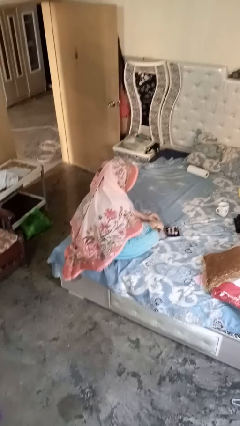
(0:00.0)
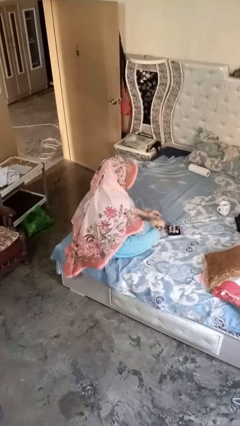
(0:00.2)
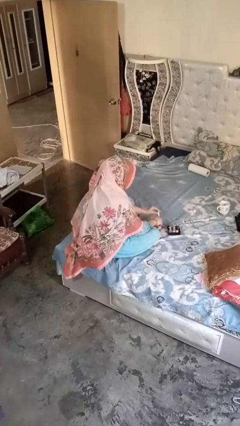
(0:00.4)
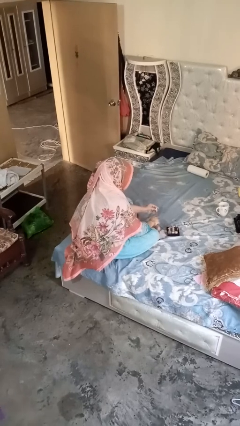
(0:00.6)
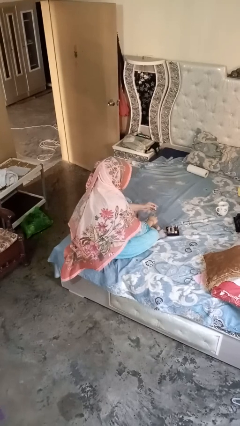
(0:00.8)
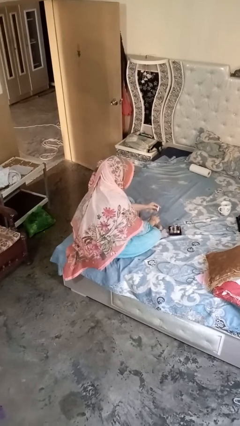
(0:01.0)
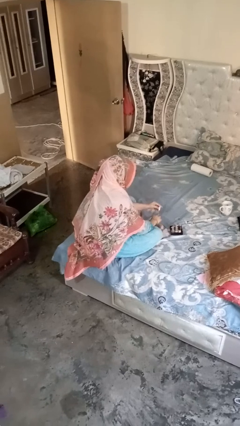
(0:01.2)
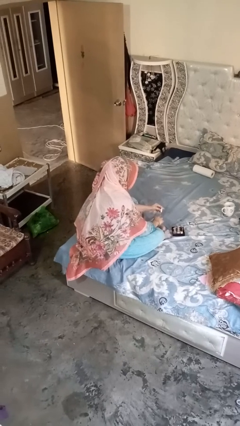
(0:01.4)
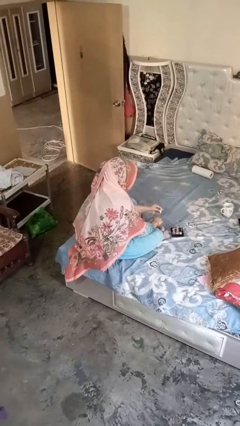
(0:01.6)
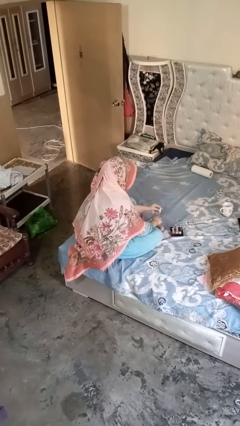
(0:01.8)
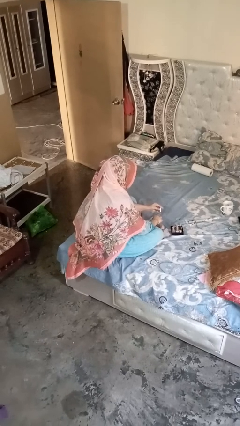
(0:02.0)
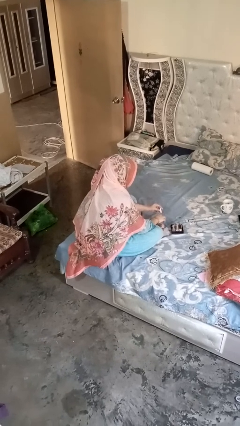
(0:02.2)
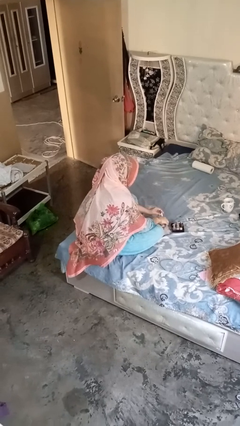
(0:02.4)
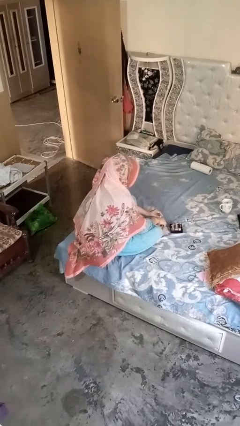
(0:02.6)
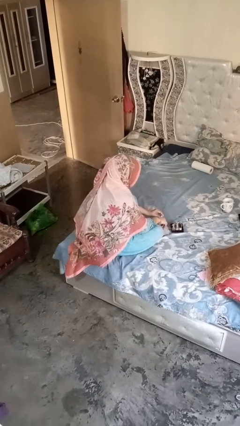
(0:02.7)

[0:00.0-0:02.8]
person paints fingernails

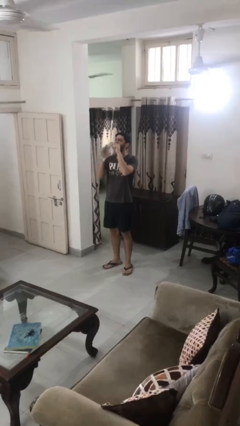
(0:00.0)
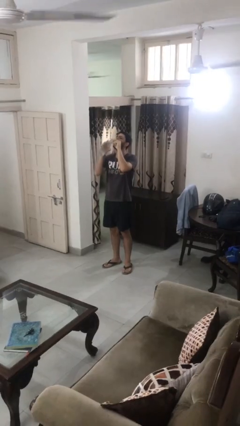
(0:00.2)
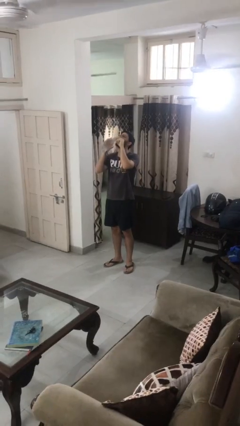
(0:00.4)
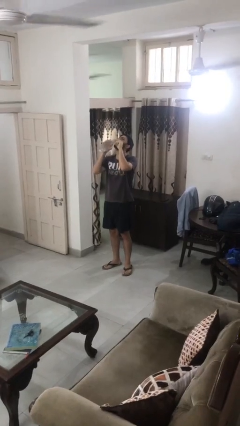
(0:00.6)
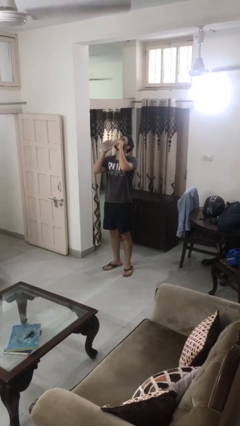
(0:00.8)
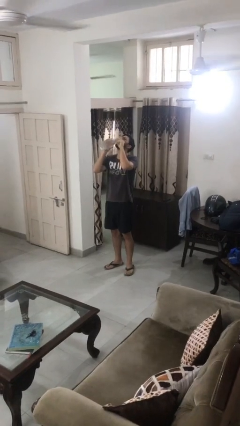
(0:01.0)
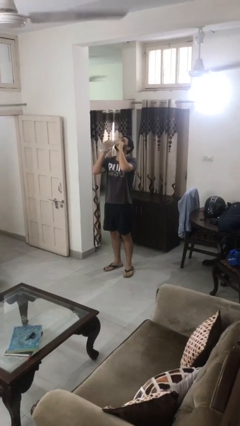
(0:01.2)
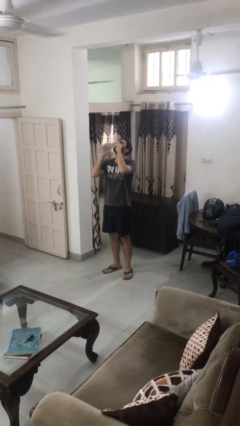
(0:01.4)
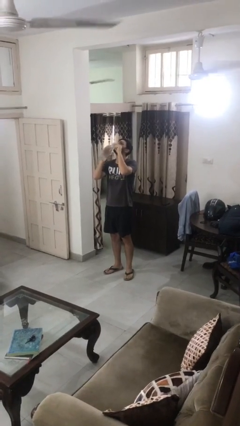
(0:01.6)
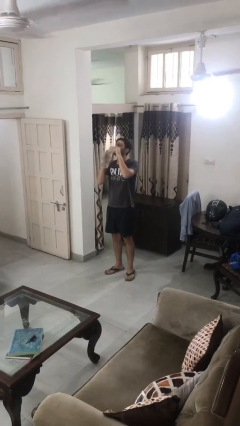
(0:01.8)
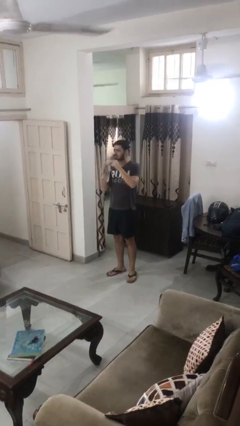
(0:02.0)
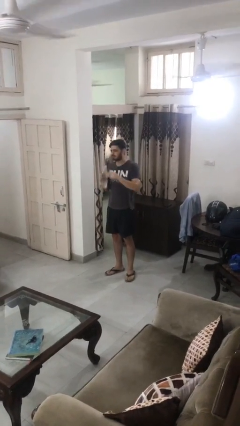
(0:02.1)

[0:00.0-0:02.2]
person drinks from bottle

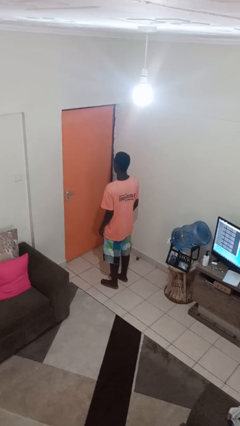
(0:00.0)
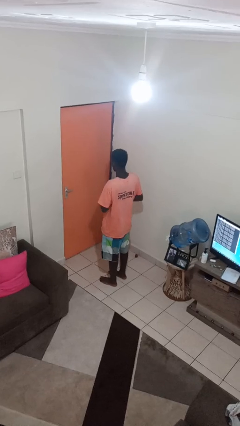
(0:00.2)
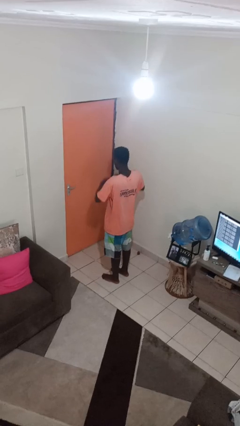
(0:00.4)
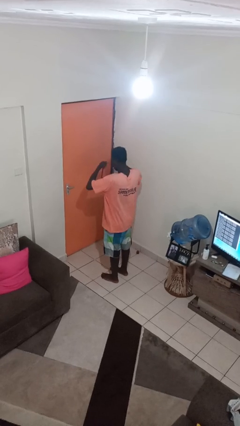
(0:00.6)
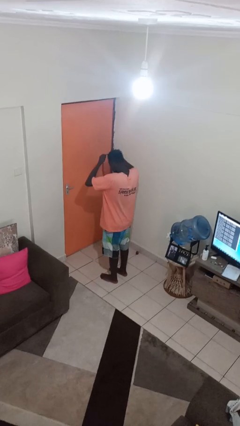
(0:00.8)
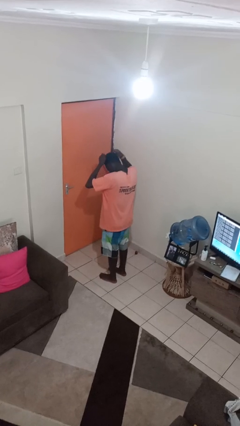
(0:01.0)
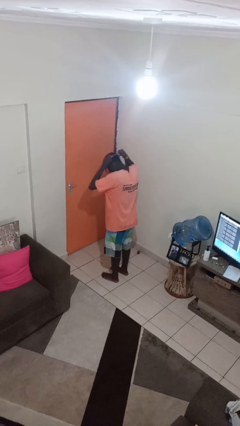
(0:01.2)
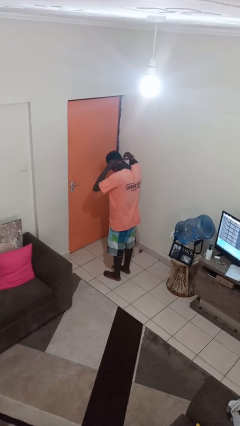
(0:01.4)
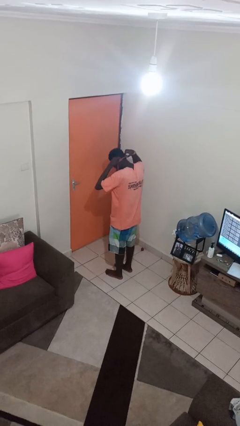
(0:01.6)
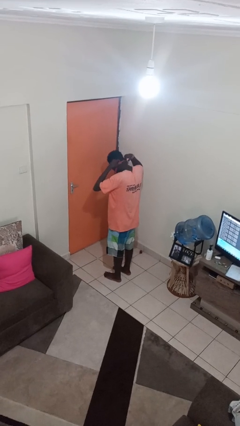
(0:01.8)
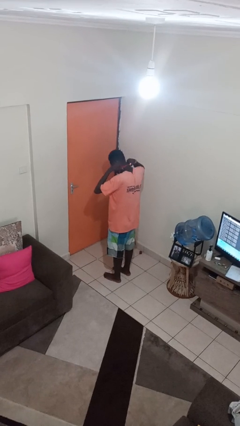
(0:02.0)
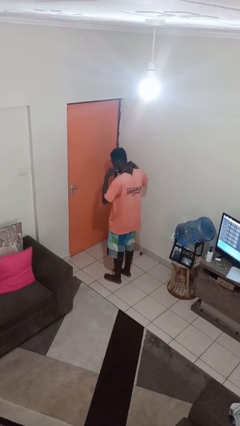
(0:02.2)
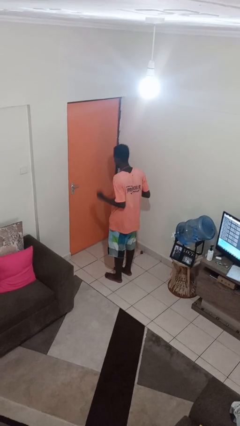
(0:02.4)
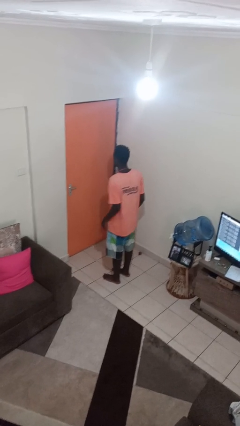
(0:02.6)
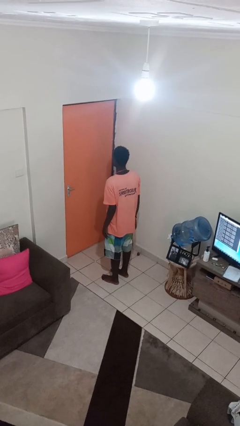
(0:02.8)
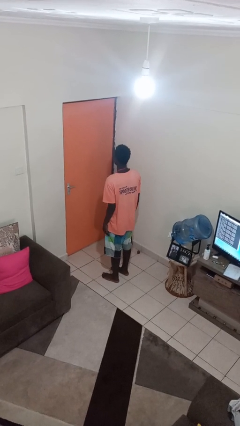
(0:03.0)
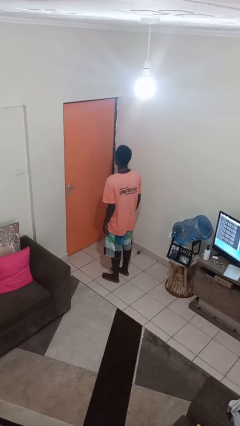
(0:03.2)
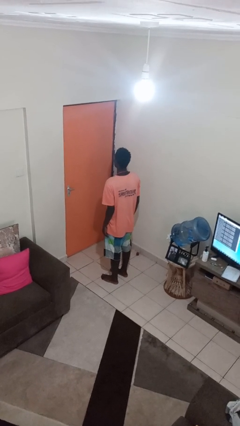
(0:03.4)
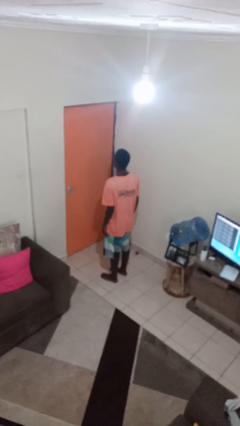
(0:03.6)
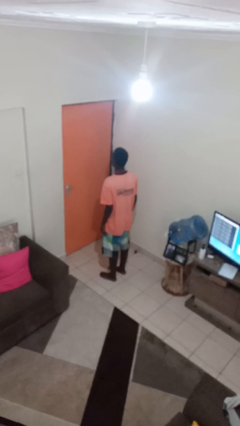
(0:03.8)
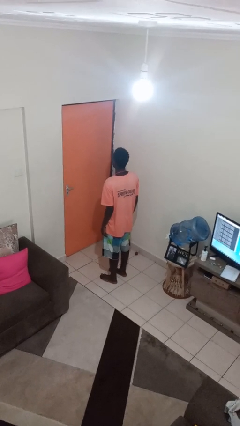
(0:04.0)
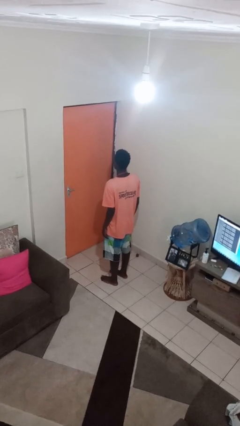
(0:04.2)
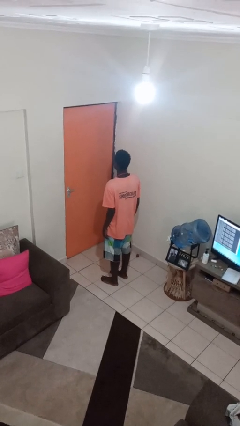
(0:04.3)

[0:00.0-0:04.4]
person puts on necklace

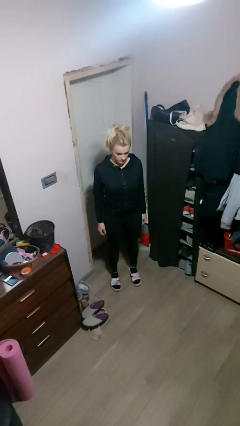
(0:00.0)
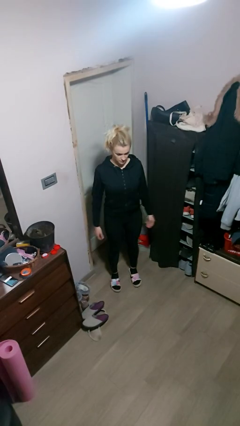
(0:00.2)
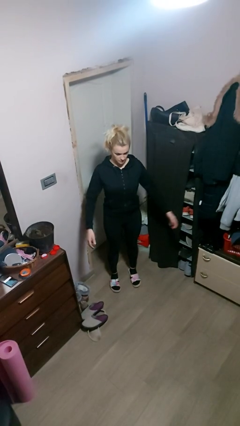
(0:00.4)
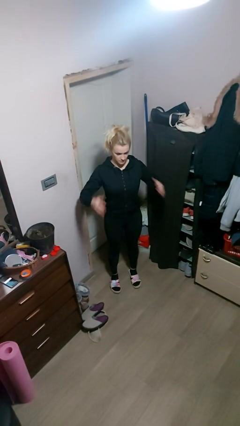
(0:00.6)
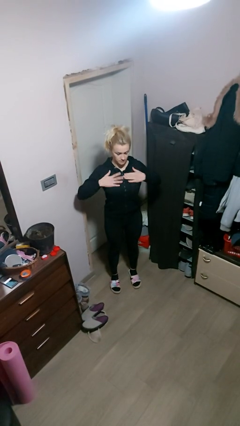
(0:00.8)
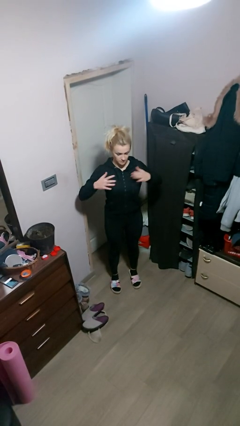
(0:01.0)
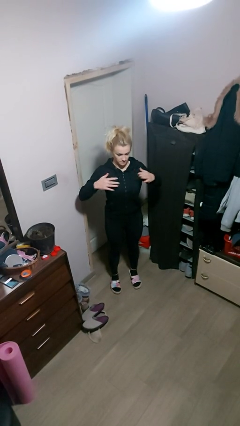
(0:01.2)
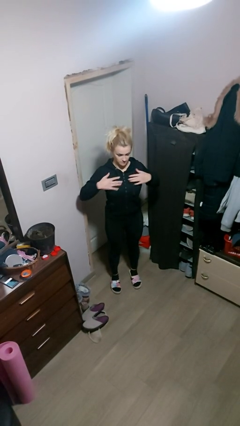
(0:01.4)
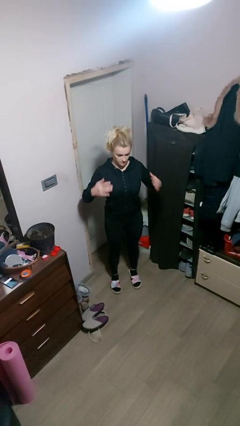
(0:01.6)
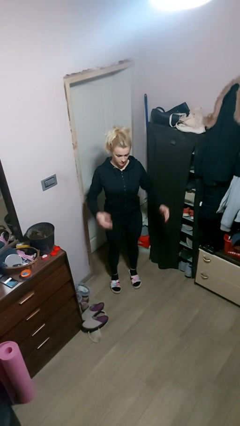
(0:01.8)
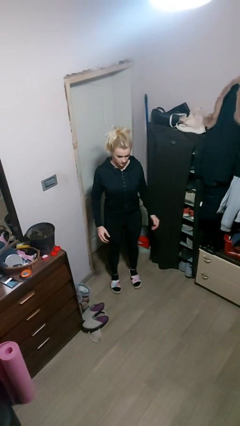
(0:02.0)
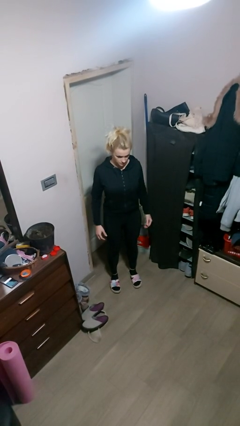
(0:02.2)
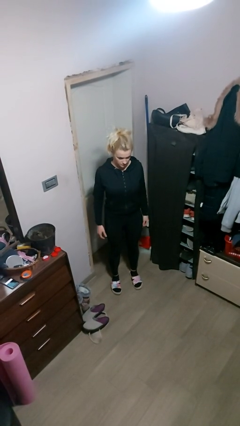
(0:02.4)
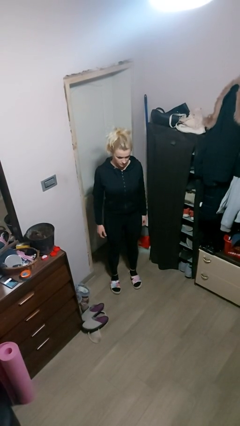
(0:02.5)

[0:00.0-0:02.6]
person drums on chest

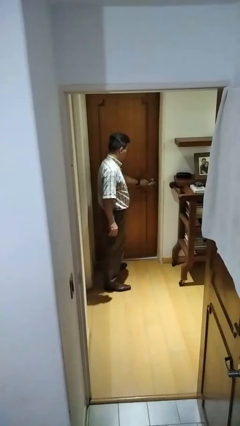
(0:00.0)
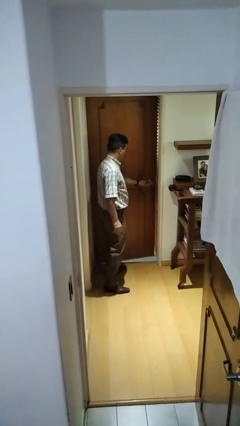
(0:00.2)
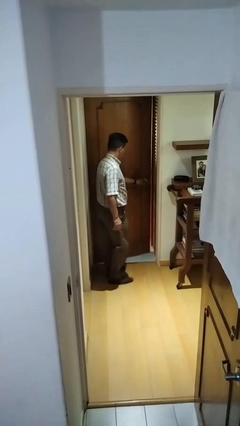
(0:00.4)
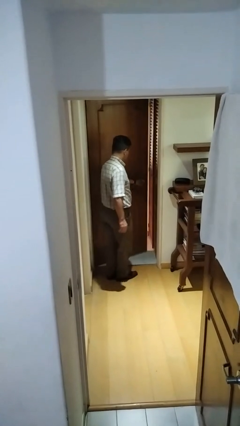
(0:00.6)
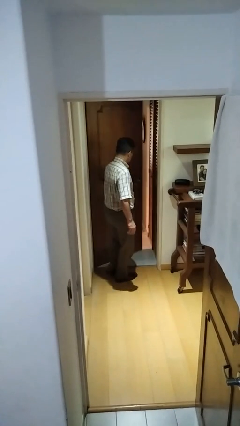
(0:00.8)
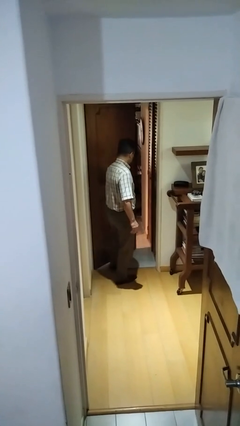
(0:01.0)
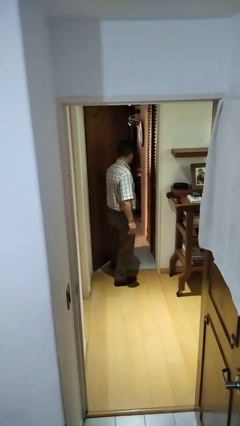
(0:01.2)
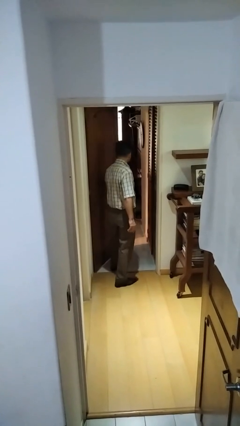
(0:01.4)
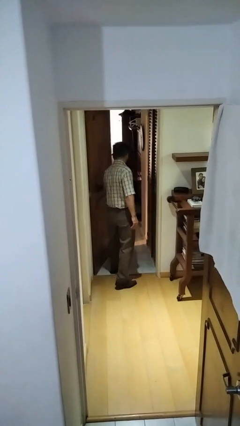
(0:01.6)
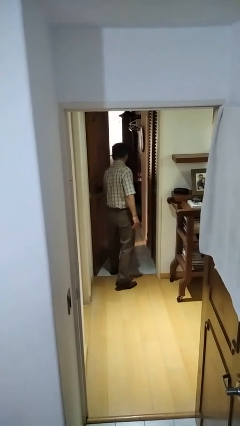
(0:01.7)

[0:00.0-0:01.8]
person opens facility door

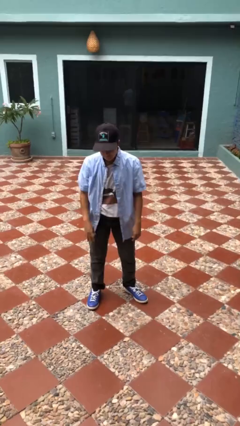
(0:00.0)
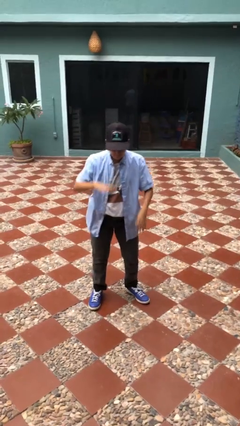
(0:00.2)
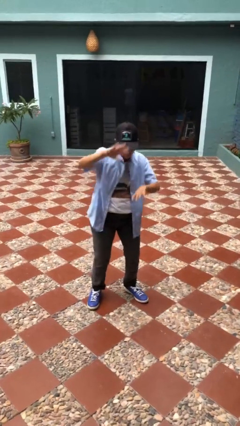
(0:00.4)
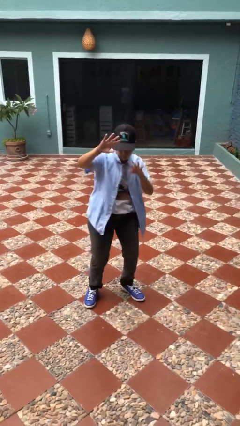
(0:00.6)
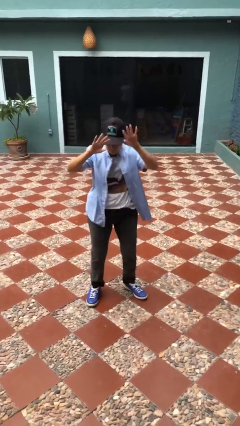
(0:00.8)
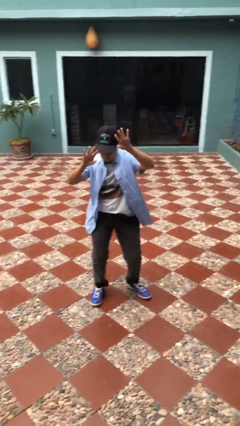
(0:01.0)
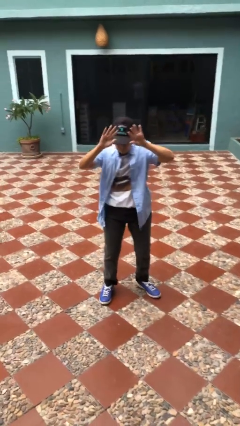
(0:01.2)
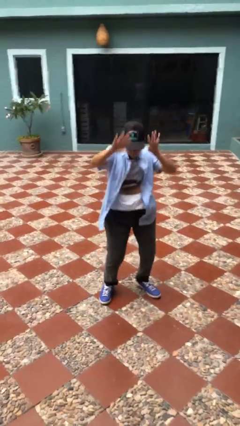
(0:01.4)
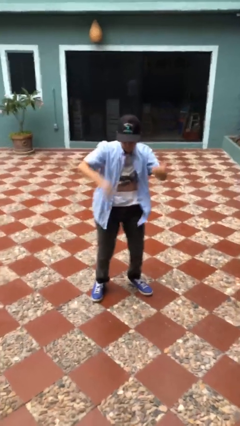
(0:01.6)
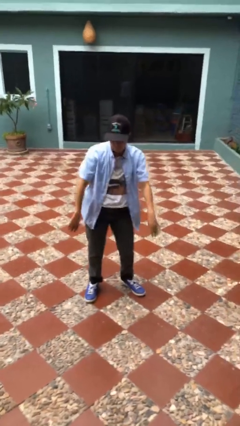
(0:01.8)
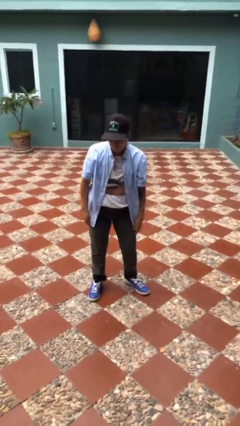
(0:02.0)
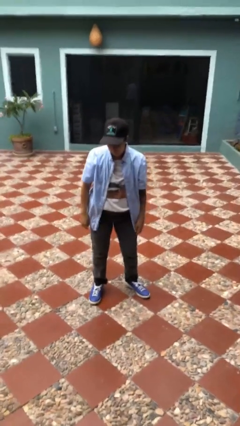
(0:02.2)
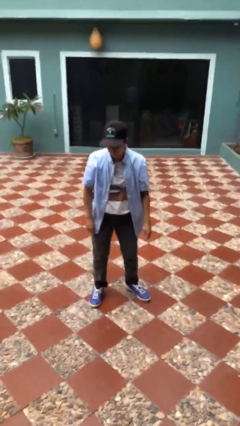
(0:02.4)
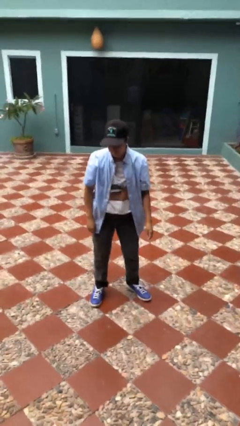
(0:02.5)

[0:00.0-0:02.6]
person dances in place

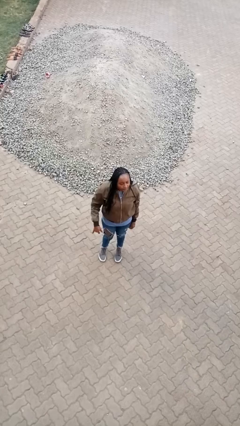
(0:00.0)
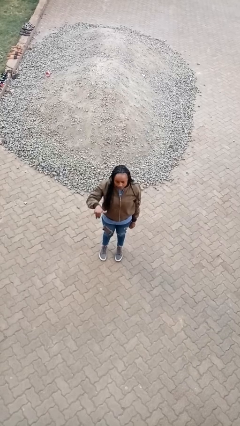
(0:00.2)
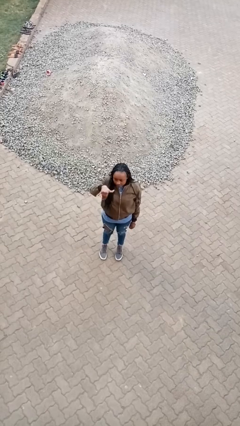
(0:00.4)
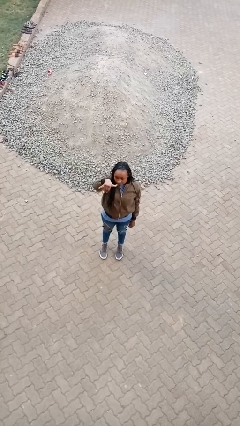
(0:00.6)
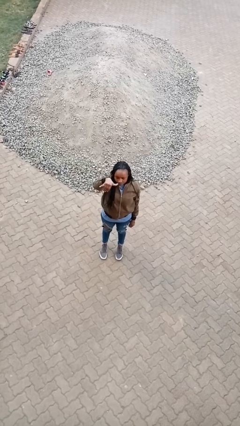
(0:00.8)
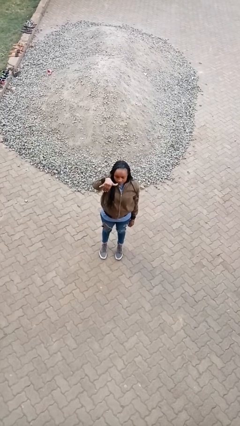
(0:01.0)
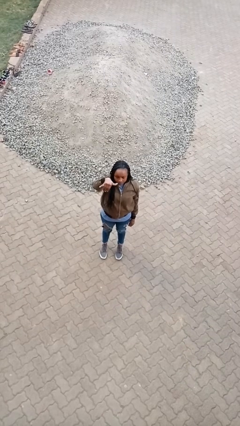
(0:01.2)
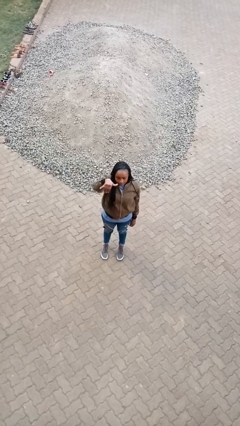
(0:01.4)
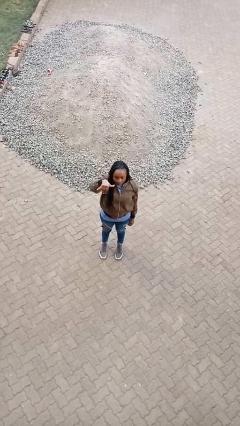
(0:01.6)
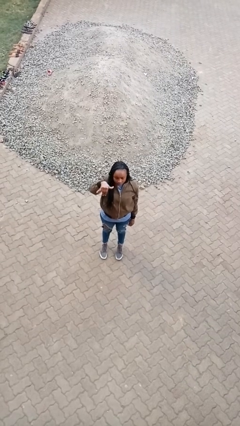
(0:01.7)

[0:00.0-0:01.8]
person gestures hang loose
